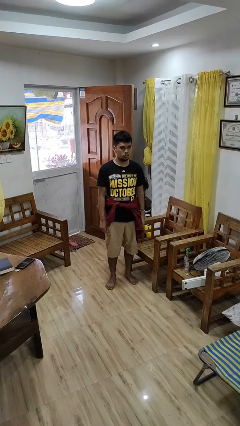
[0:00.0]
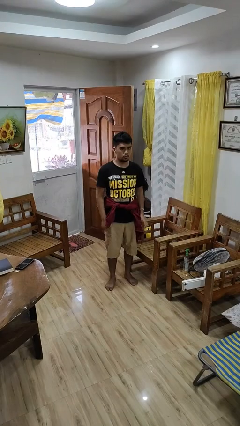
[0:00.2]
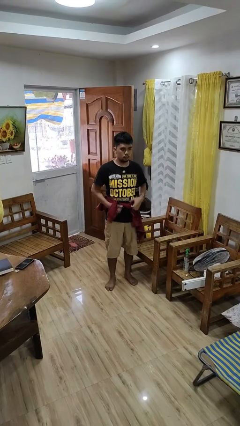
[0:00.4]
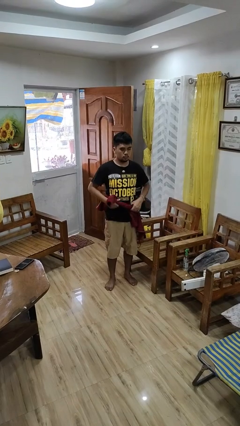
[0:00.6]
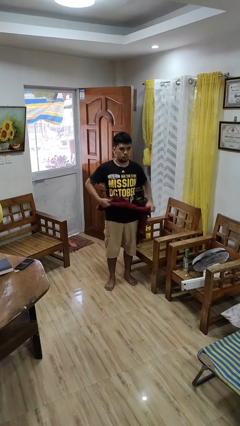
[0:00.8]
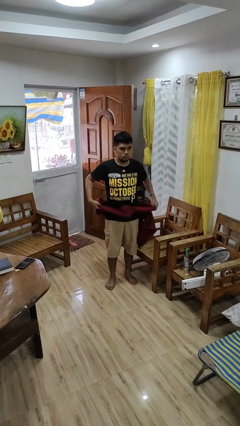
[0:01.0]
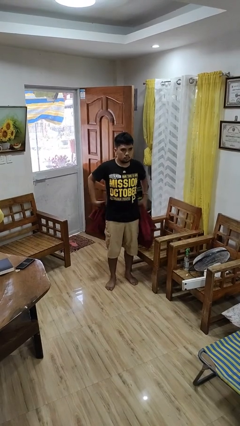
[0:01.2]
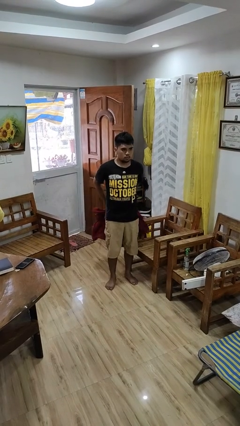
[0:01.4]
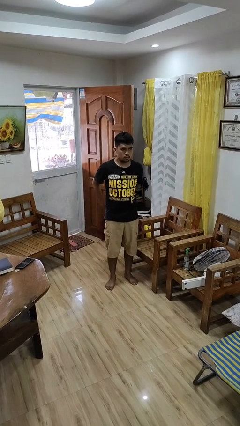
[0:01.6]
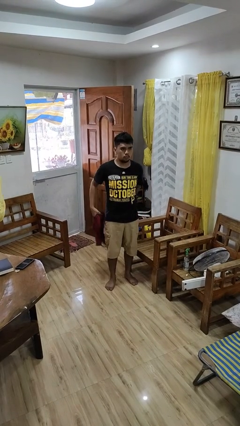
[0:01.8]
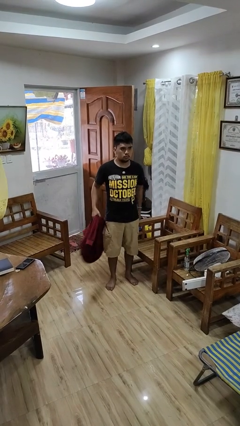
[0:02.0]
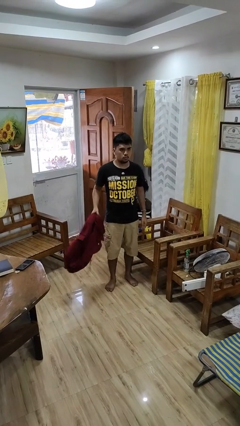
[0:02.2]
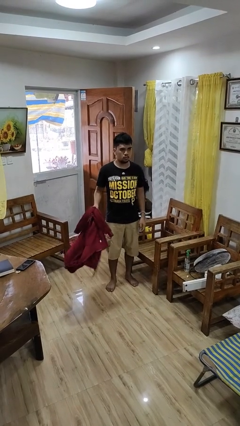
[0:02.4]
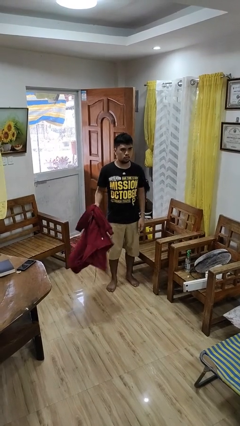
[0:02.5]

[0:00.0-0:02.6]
person unties jacket around waist

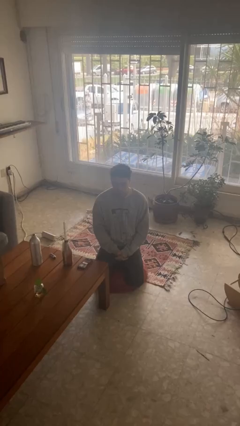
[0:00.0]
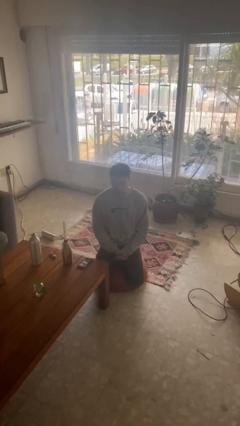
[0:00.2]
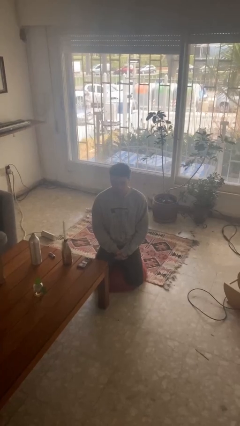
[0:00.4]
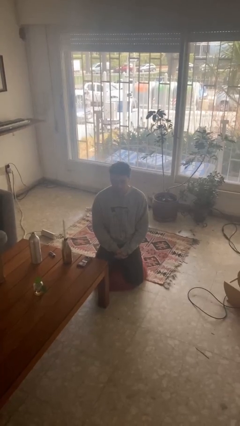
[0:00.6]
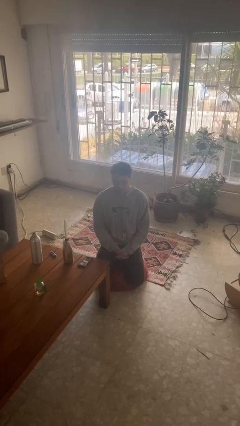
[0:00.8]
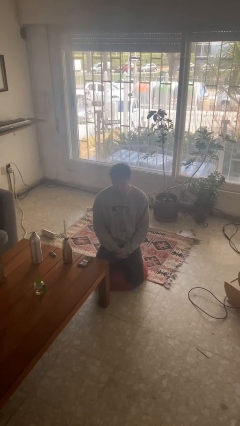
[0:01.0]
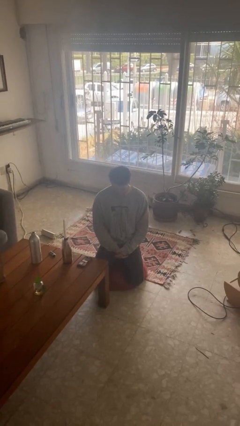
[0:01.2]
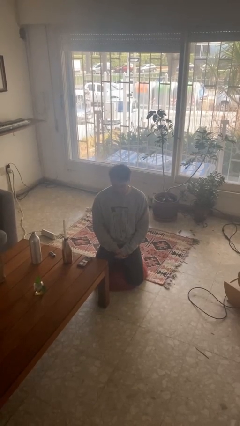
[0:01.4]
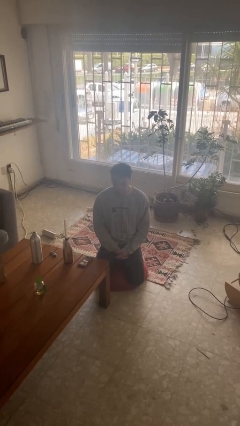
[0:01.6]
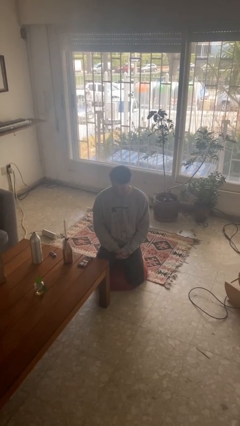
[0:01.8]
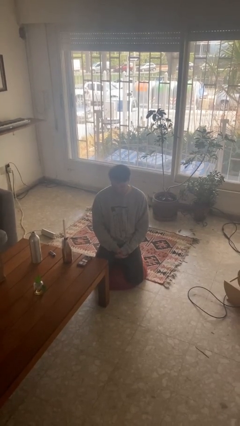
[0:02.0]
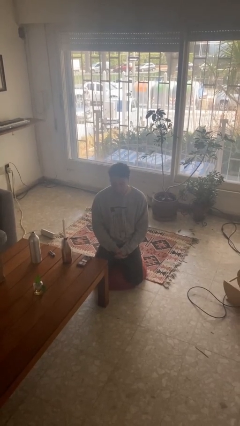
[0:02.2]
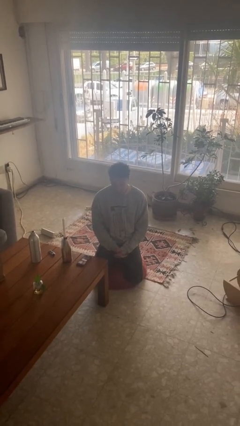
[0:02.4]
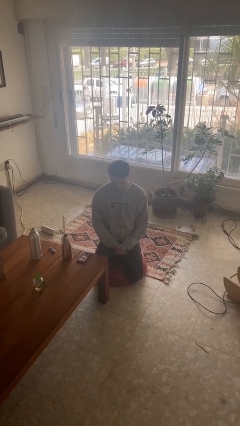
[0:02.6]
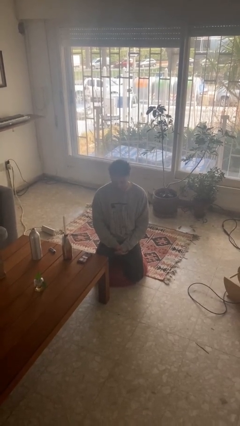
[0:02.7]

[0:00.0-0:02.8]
person nods head

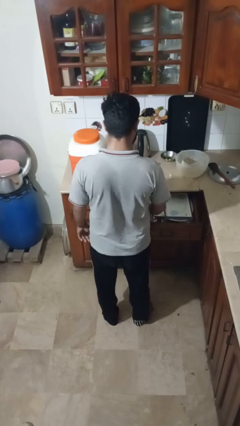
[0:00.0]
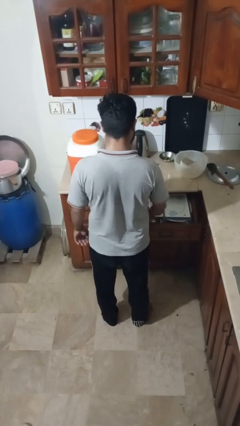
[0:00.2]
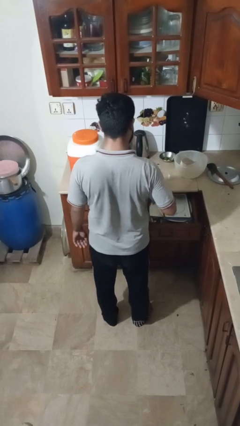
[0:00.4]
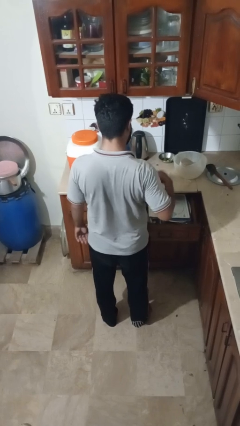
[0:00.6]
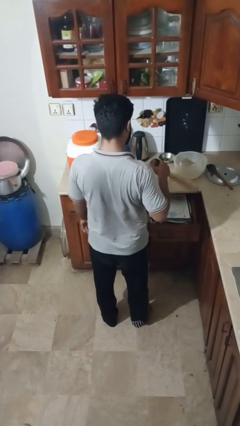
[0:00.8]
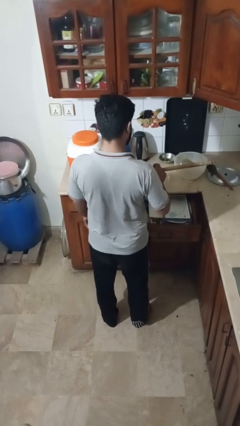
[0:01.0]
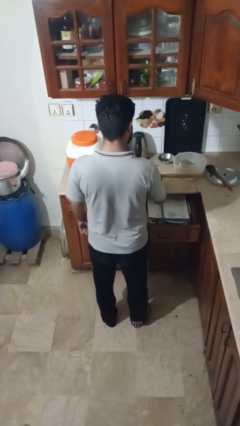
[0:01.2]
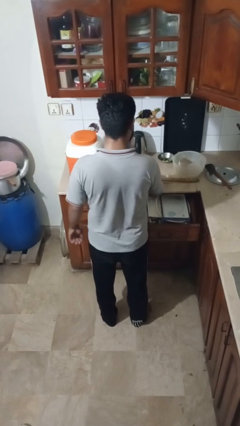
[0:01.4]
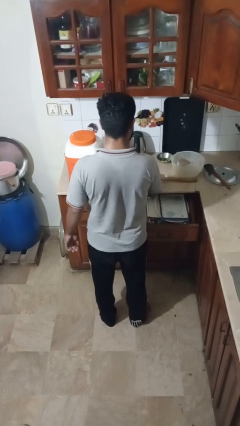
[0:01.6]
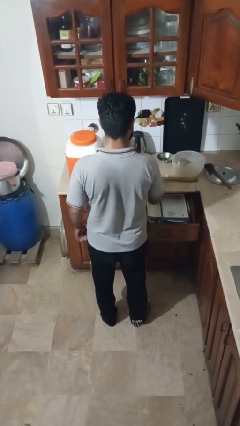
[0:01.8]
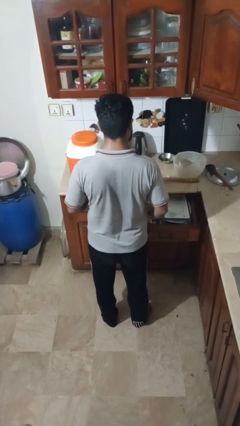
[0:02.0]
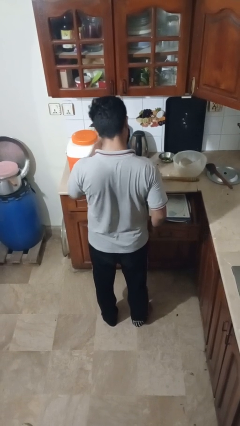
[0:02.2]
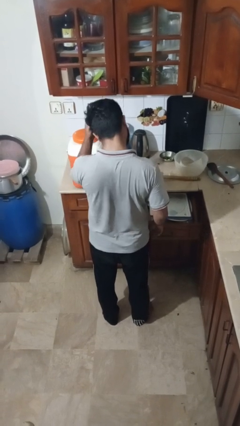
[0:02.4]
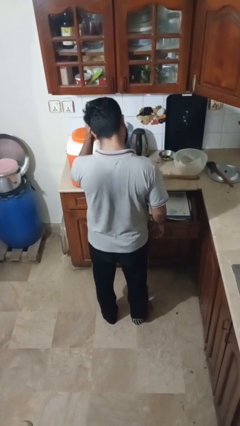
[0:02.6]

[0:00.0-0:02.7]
person takes object from kitchen drawer

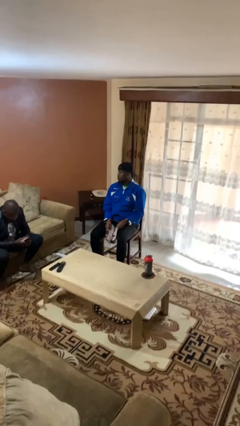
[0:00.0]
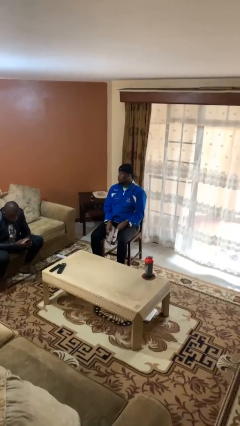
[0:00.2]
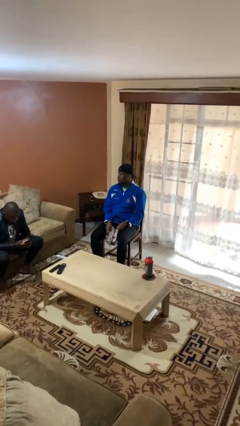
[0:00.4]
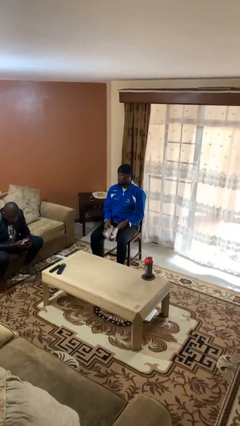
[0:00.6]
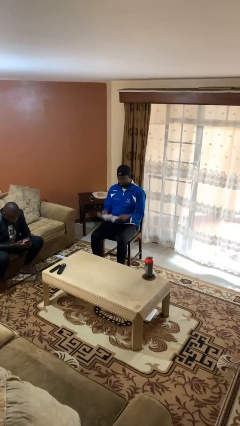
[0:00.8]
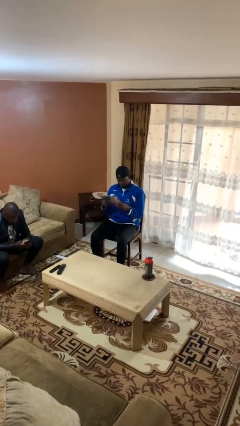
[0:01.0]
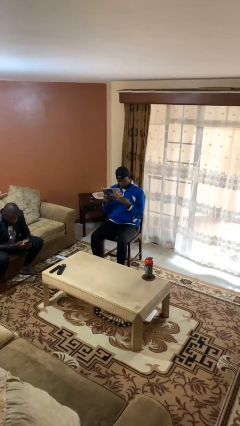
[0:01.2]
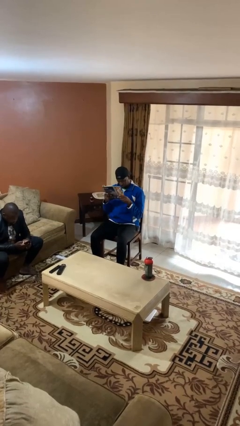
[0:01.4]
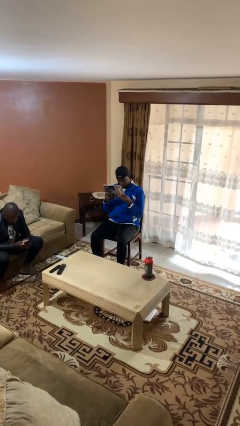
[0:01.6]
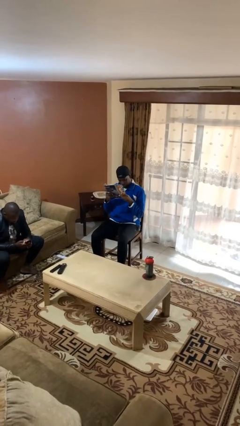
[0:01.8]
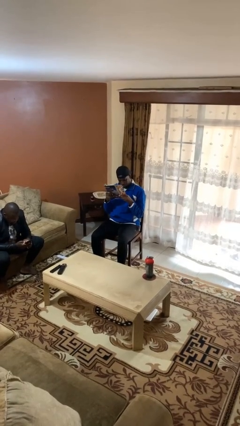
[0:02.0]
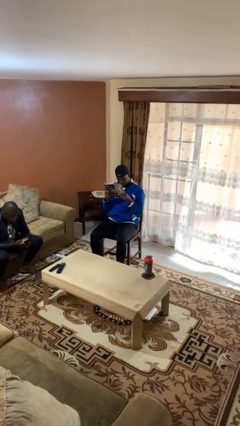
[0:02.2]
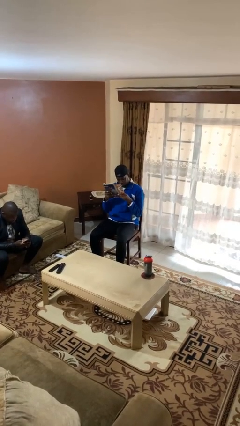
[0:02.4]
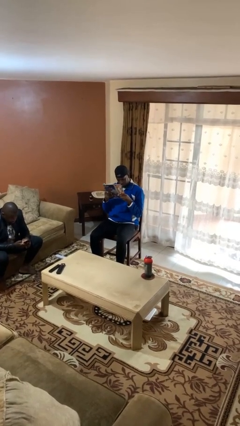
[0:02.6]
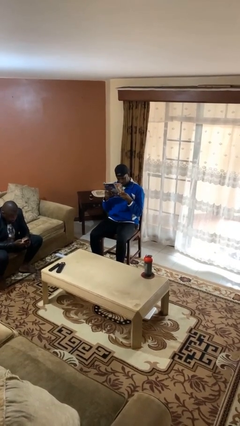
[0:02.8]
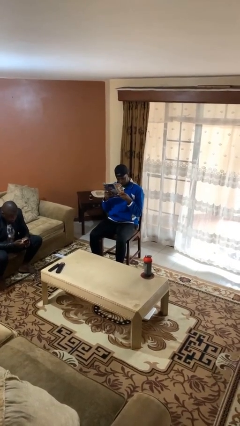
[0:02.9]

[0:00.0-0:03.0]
person reads document

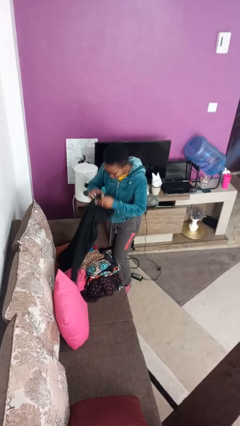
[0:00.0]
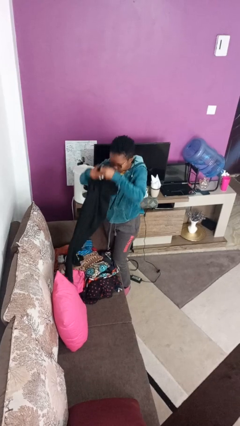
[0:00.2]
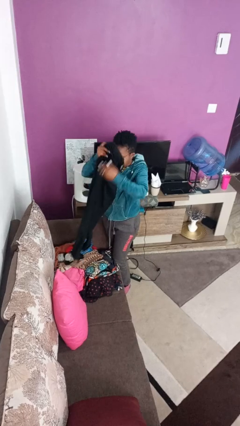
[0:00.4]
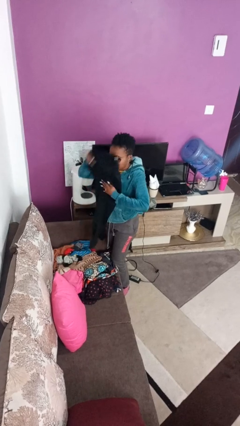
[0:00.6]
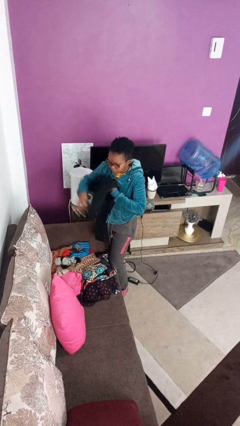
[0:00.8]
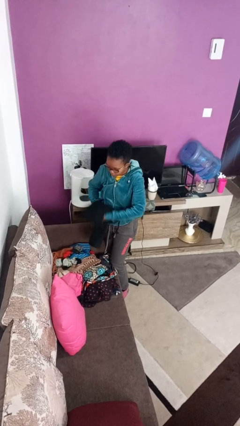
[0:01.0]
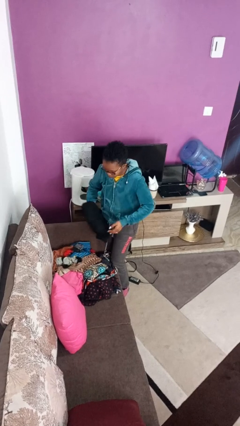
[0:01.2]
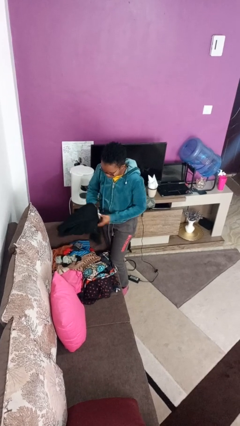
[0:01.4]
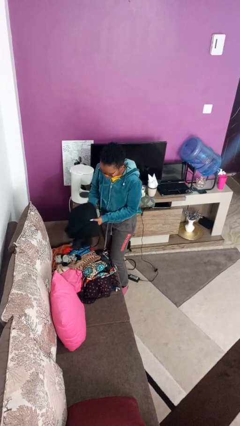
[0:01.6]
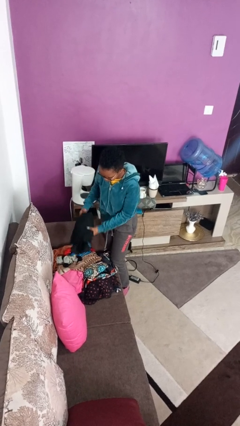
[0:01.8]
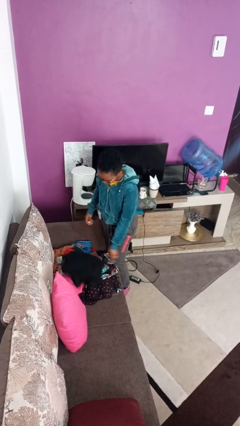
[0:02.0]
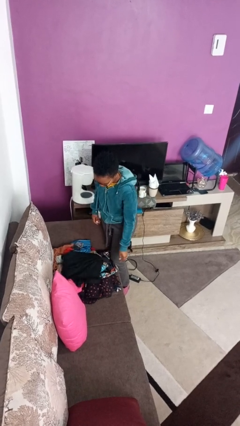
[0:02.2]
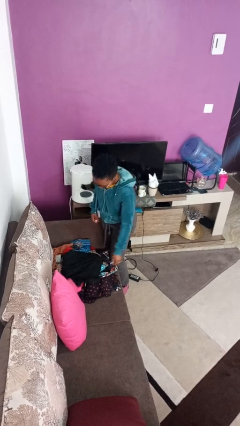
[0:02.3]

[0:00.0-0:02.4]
person folds pants

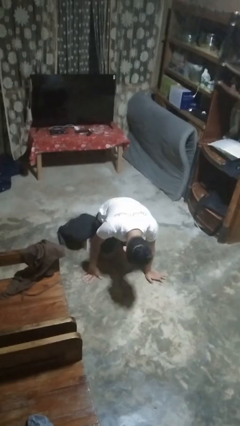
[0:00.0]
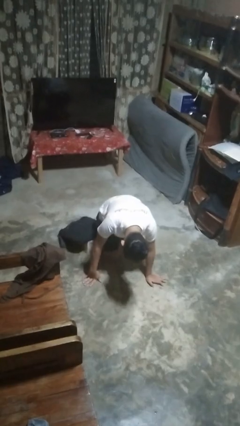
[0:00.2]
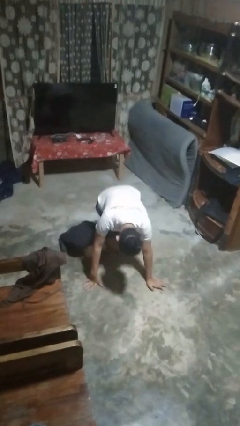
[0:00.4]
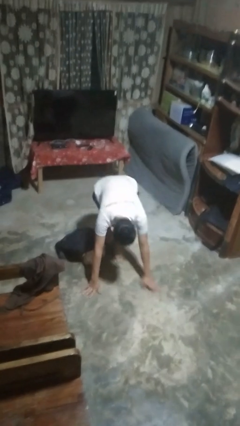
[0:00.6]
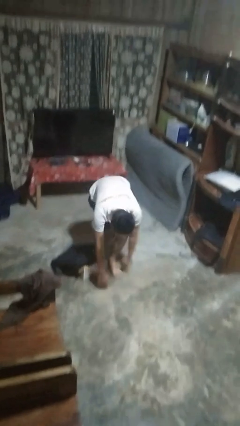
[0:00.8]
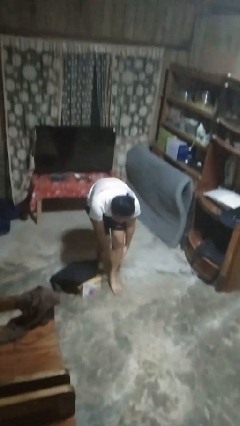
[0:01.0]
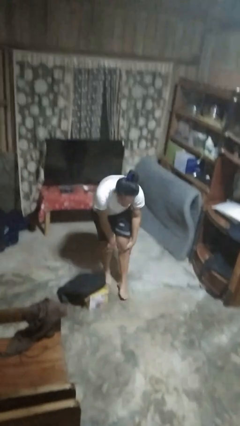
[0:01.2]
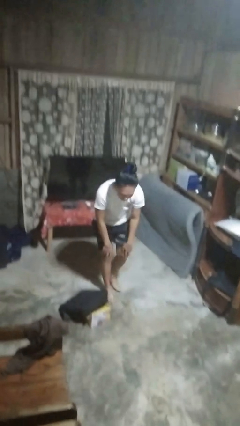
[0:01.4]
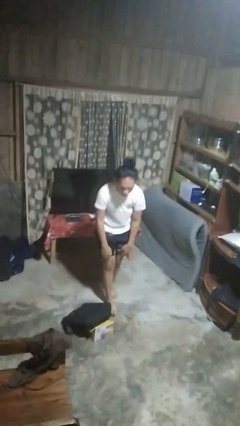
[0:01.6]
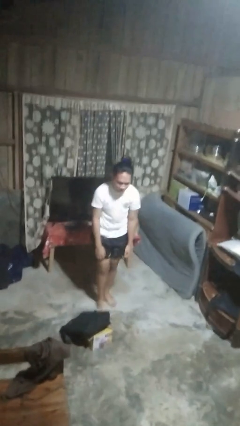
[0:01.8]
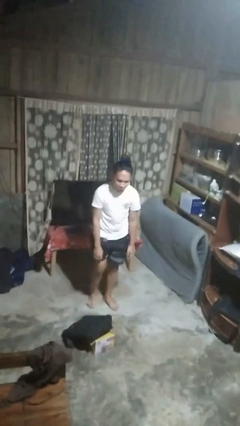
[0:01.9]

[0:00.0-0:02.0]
person stands up from floor

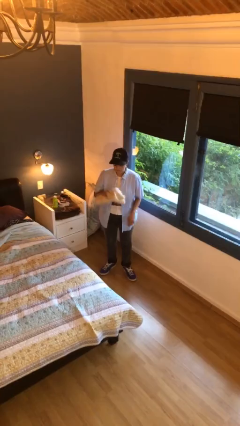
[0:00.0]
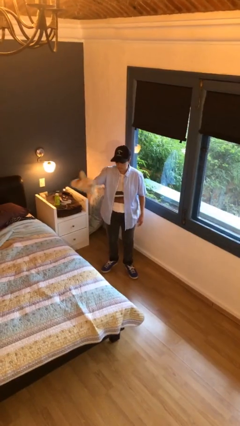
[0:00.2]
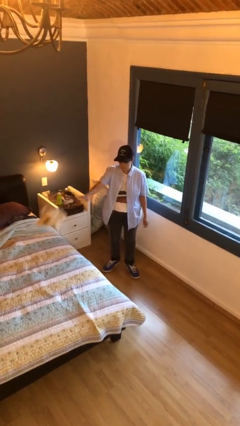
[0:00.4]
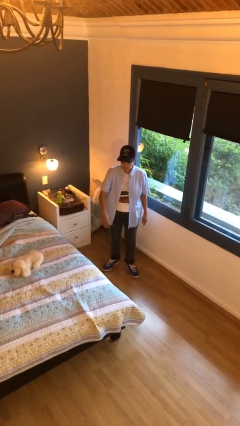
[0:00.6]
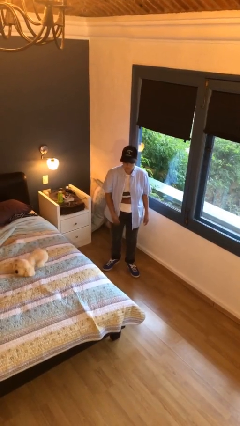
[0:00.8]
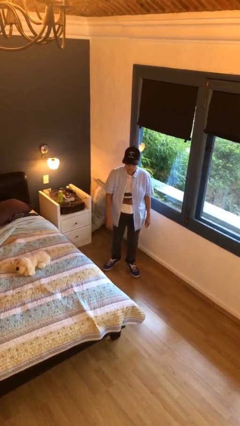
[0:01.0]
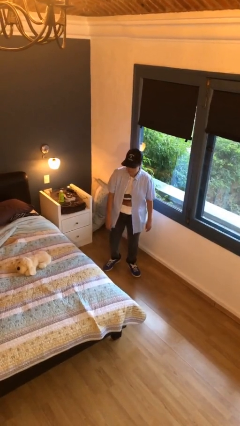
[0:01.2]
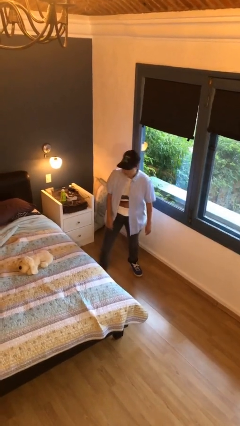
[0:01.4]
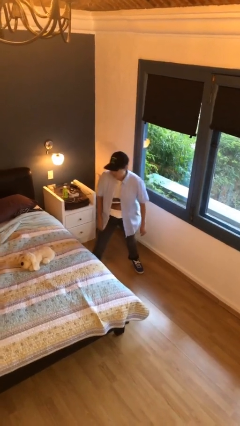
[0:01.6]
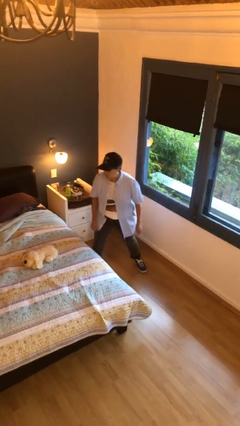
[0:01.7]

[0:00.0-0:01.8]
person throws object on bed
